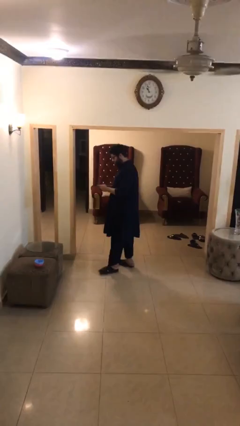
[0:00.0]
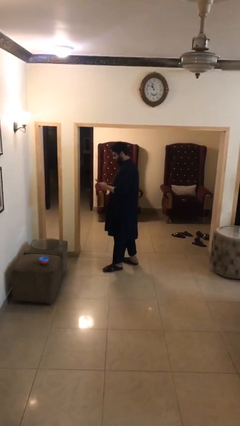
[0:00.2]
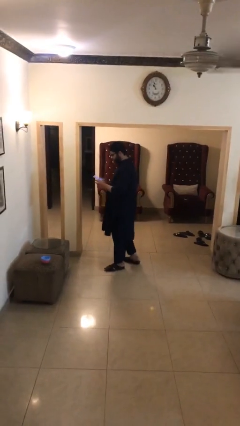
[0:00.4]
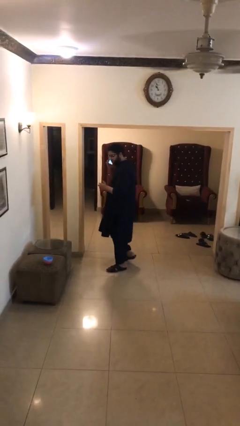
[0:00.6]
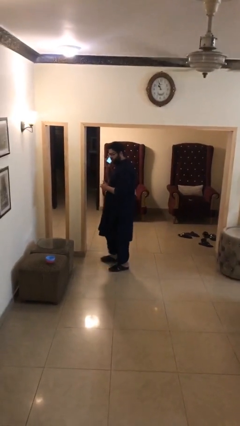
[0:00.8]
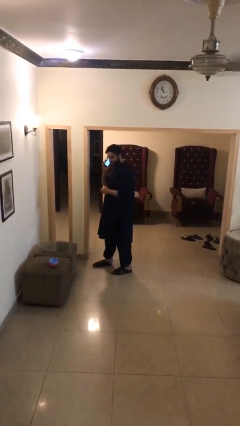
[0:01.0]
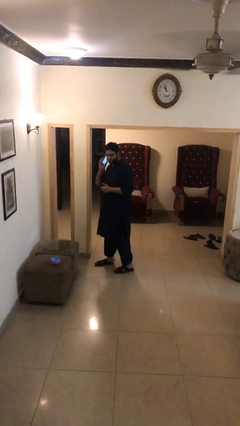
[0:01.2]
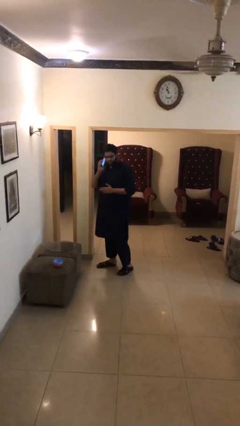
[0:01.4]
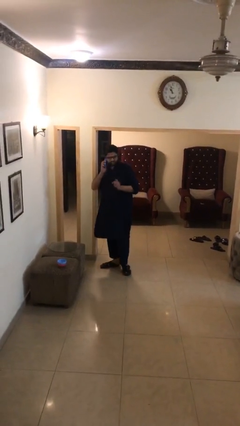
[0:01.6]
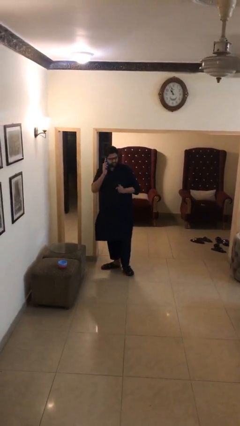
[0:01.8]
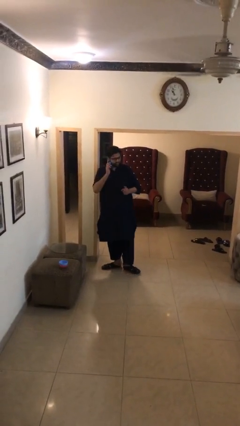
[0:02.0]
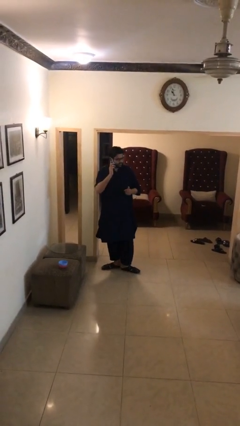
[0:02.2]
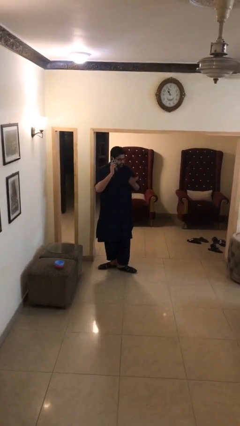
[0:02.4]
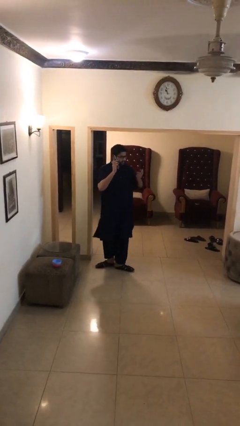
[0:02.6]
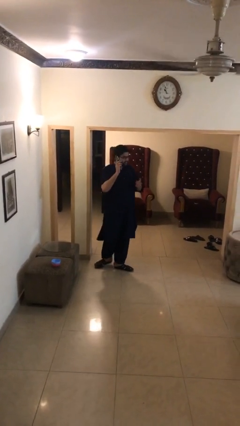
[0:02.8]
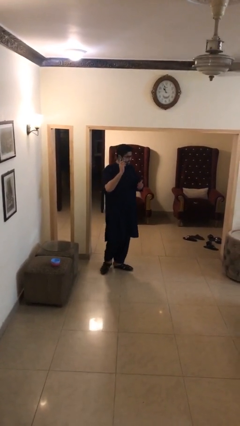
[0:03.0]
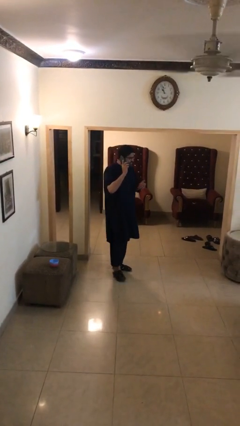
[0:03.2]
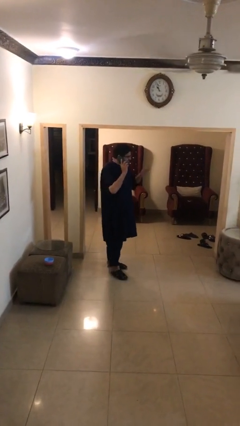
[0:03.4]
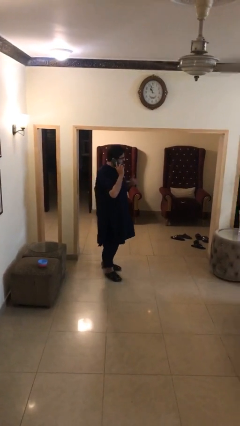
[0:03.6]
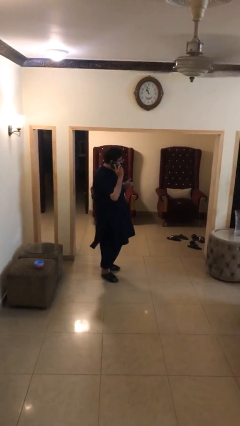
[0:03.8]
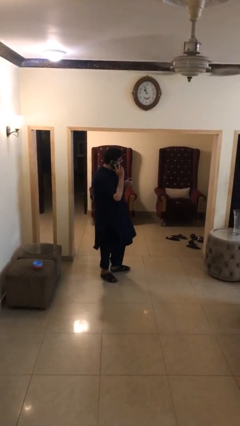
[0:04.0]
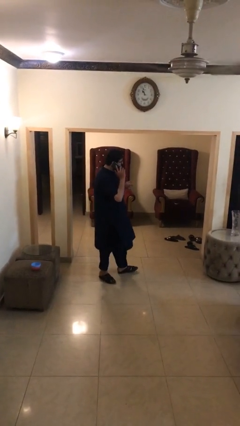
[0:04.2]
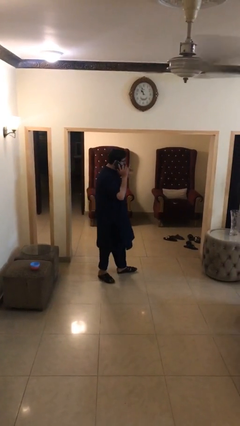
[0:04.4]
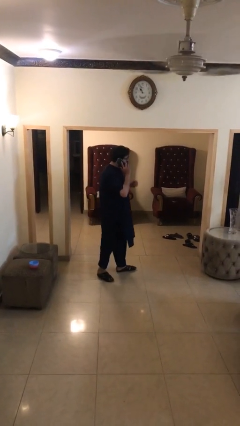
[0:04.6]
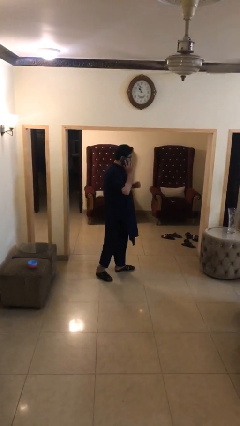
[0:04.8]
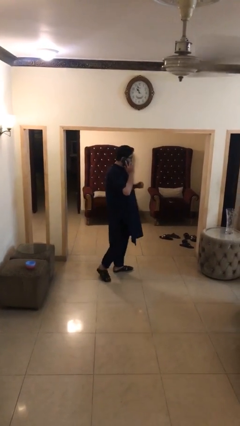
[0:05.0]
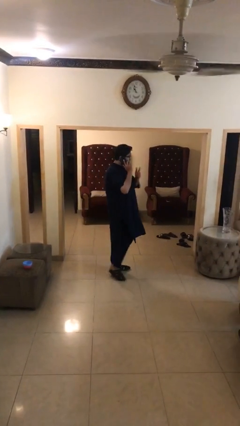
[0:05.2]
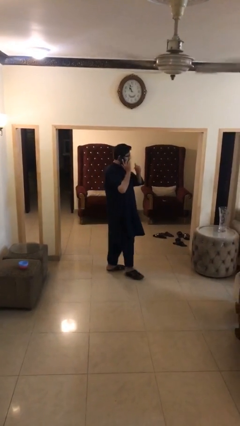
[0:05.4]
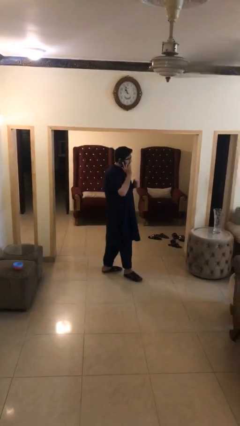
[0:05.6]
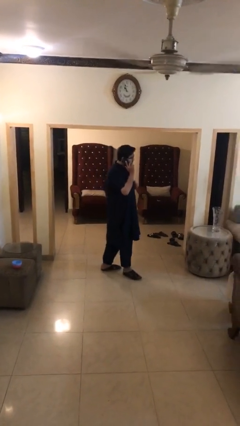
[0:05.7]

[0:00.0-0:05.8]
person talks on phone

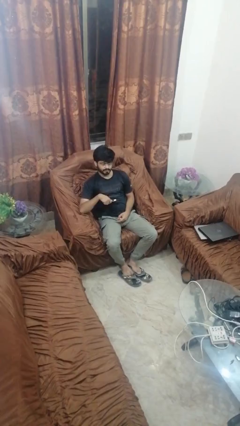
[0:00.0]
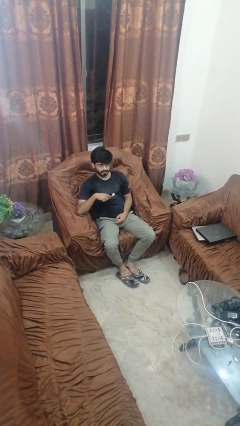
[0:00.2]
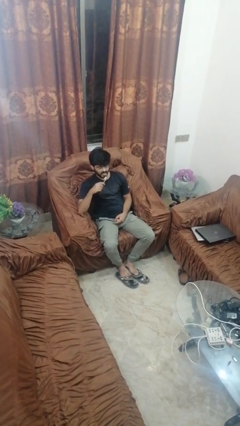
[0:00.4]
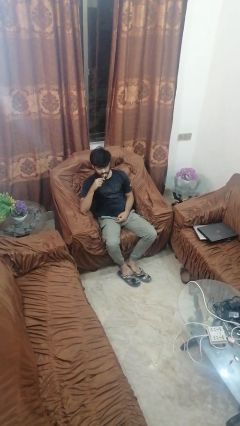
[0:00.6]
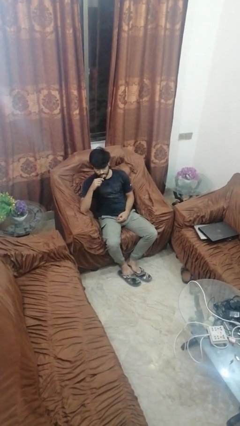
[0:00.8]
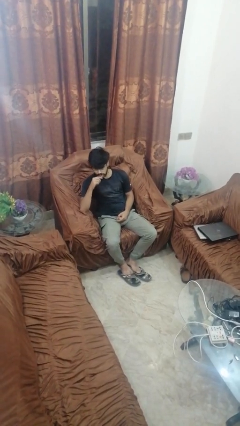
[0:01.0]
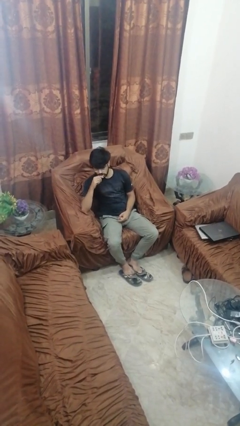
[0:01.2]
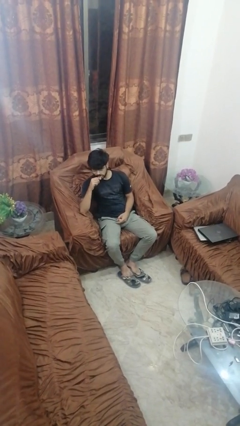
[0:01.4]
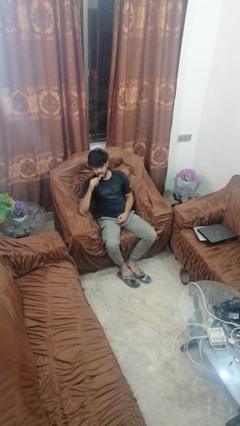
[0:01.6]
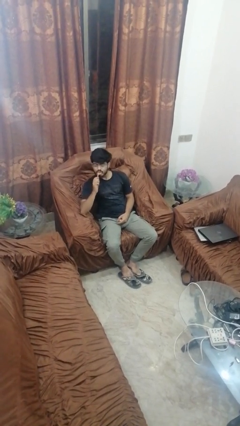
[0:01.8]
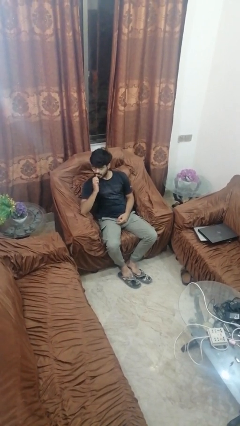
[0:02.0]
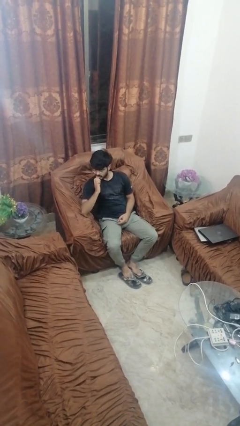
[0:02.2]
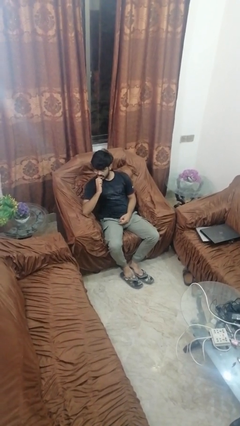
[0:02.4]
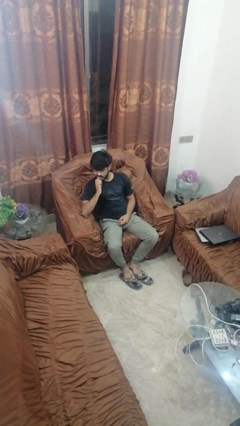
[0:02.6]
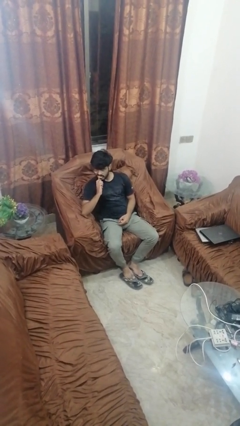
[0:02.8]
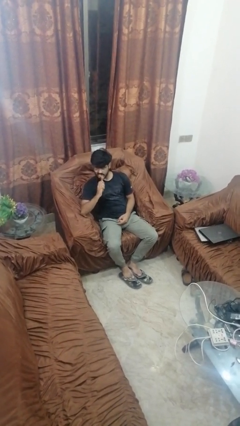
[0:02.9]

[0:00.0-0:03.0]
person brushes teeth

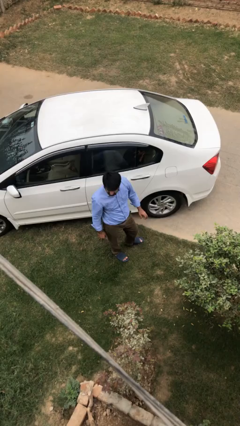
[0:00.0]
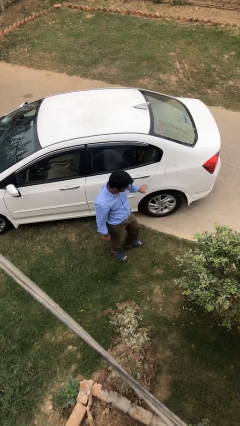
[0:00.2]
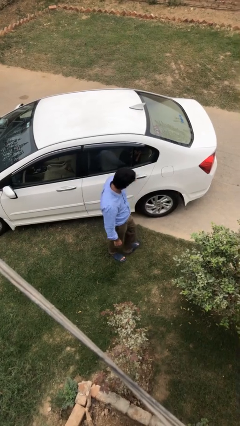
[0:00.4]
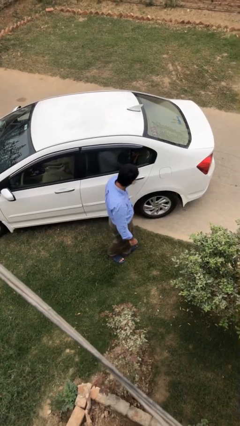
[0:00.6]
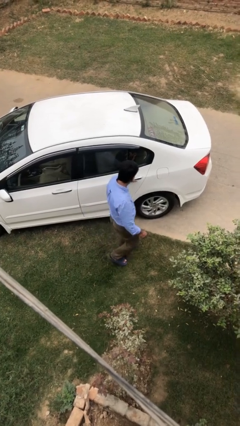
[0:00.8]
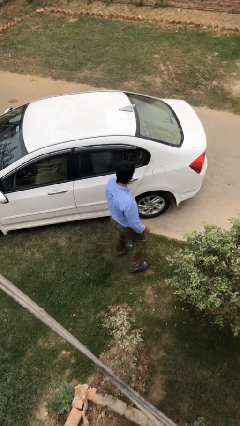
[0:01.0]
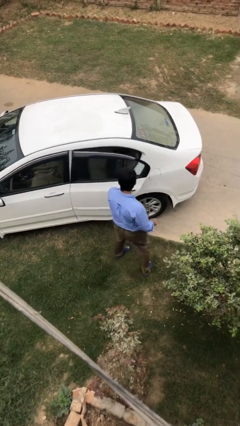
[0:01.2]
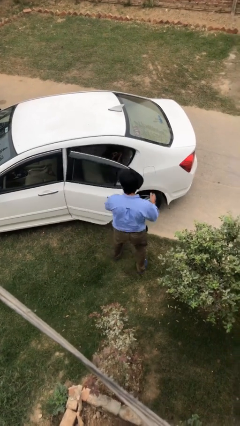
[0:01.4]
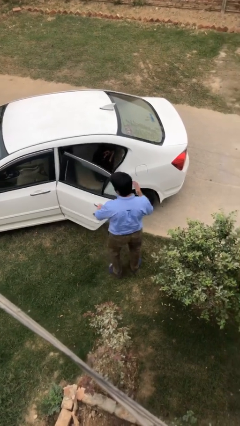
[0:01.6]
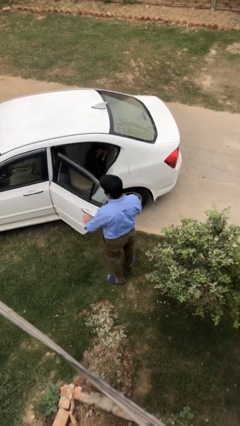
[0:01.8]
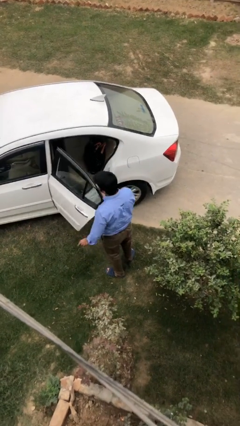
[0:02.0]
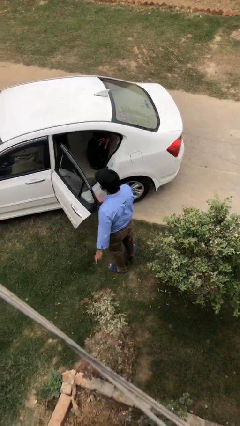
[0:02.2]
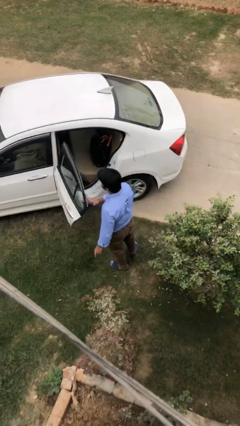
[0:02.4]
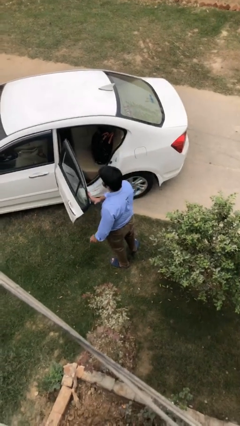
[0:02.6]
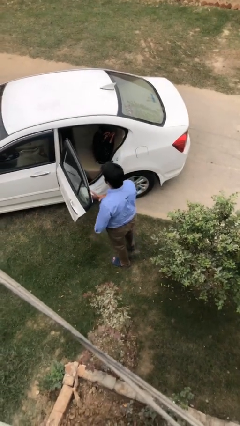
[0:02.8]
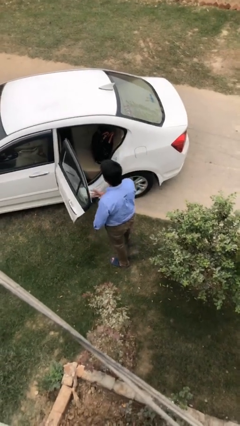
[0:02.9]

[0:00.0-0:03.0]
person opens car door

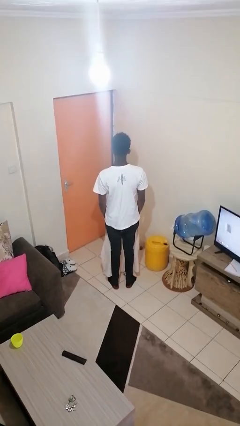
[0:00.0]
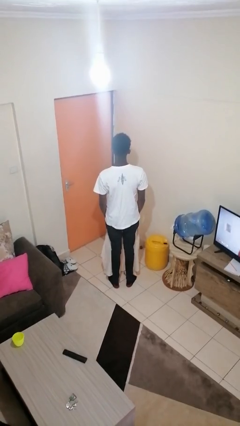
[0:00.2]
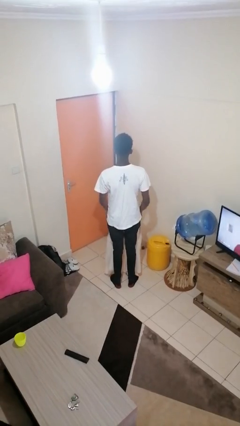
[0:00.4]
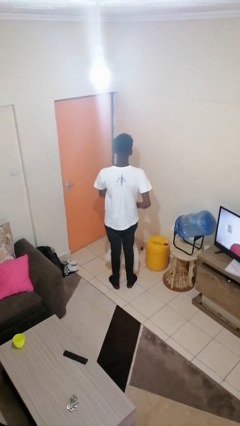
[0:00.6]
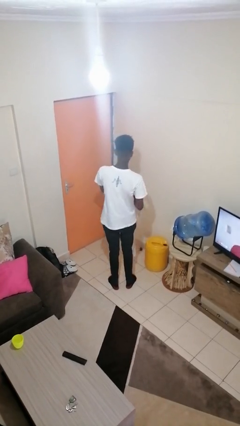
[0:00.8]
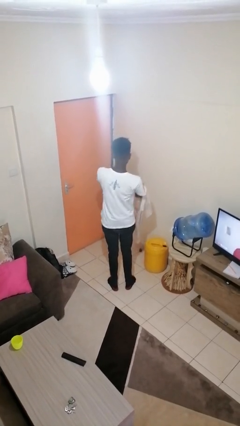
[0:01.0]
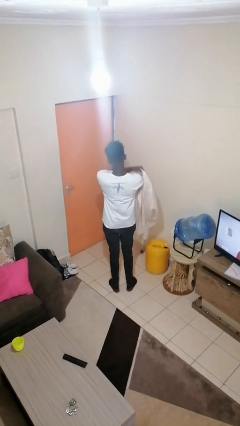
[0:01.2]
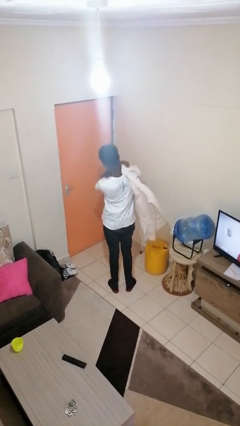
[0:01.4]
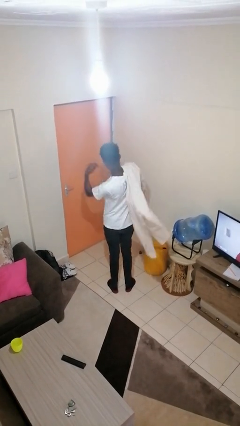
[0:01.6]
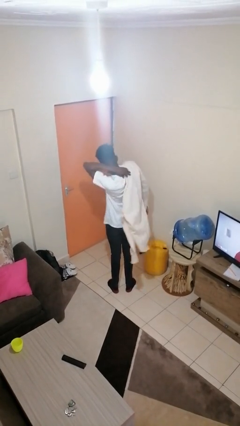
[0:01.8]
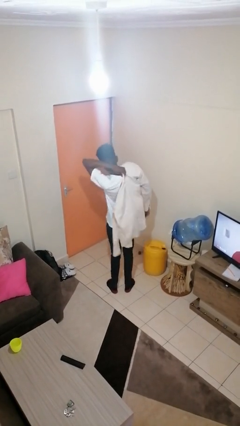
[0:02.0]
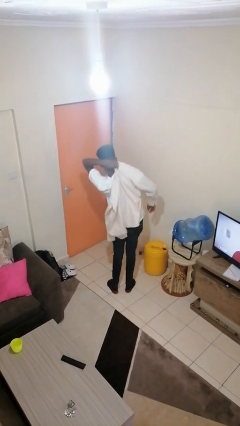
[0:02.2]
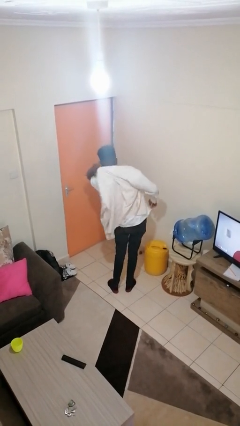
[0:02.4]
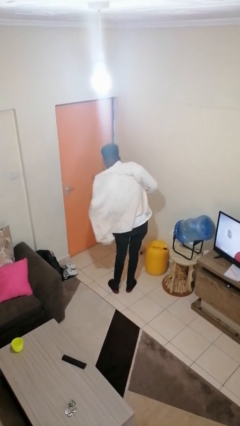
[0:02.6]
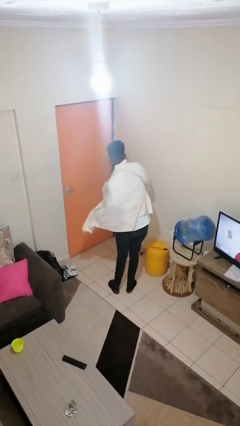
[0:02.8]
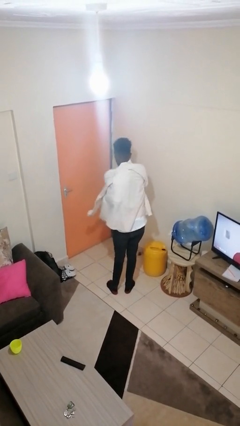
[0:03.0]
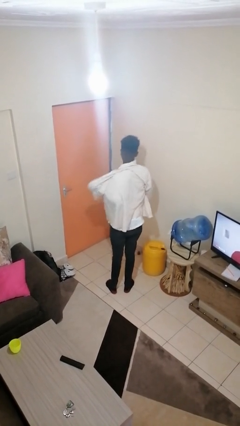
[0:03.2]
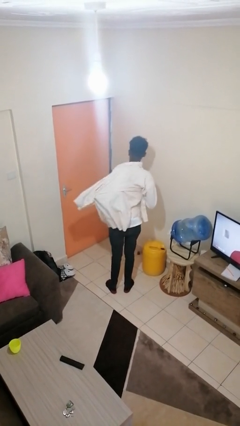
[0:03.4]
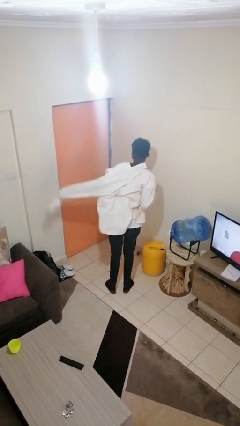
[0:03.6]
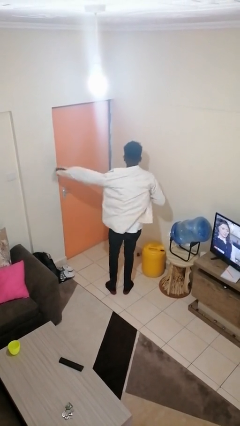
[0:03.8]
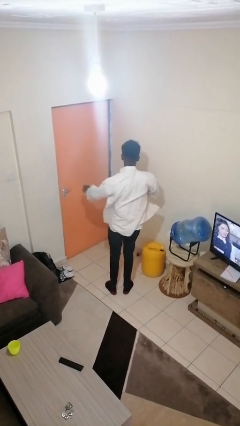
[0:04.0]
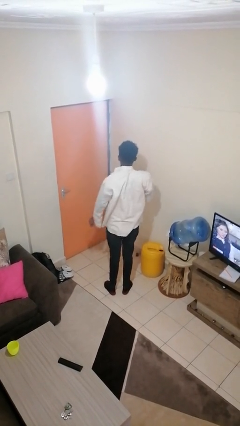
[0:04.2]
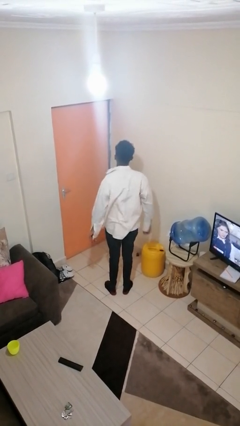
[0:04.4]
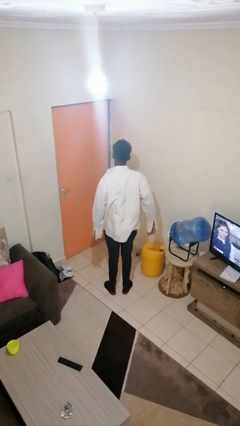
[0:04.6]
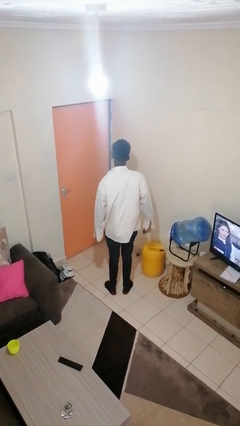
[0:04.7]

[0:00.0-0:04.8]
person puts on shirt

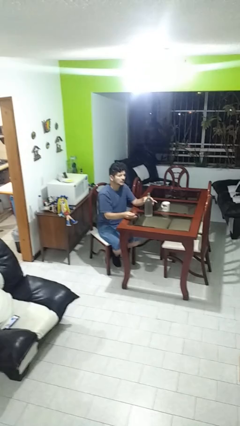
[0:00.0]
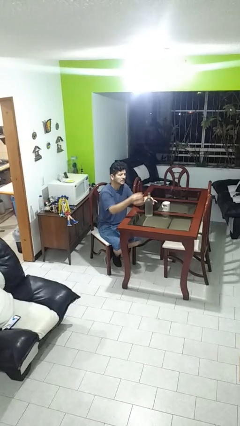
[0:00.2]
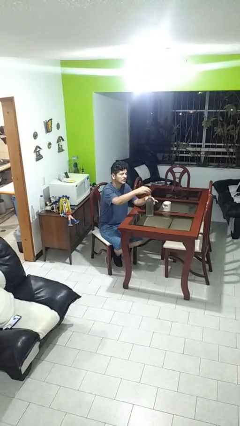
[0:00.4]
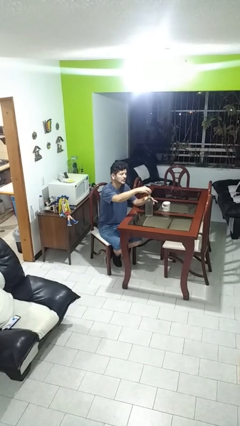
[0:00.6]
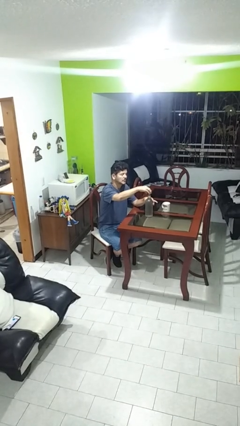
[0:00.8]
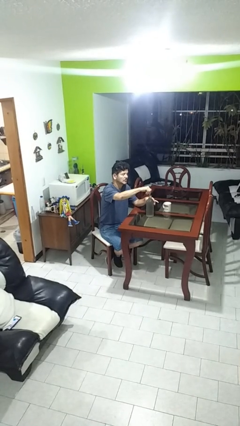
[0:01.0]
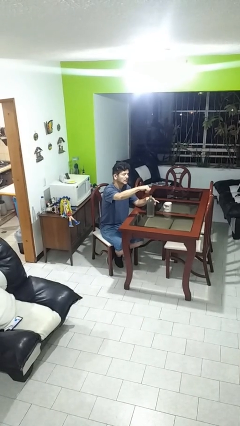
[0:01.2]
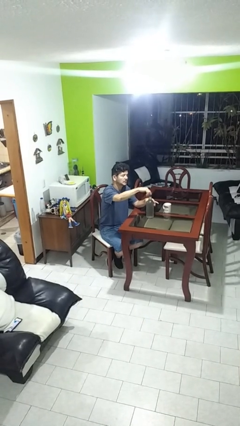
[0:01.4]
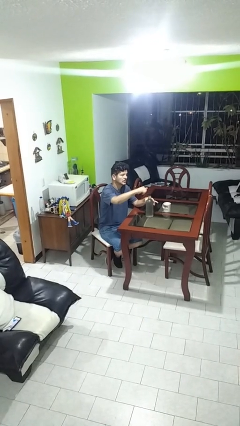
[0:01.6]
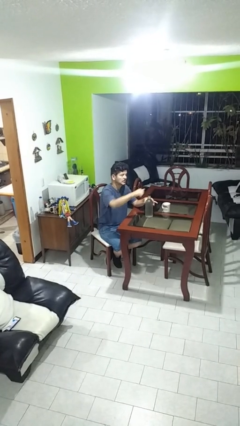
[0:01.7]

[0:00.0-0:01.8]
person screws lid to bottle
